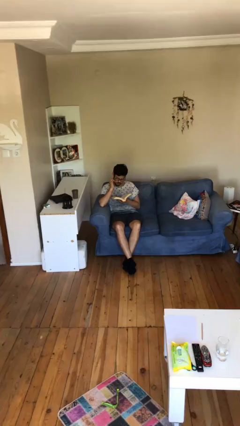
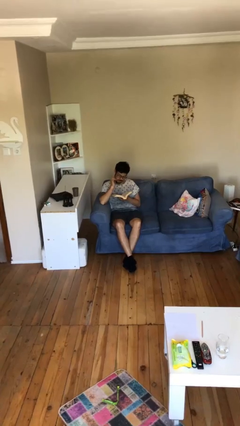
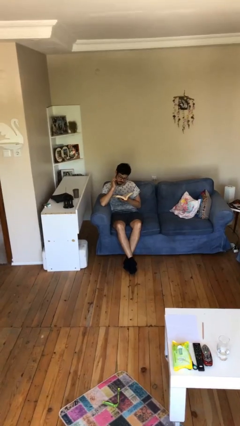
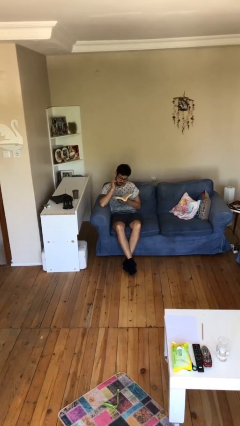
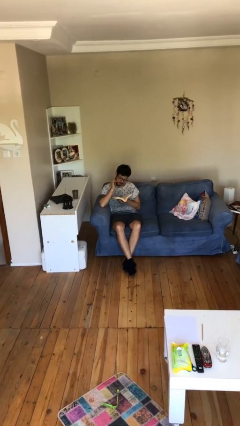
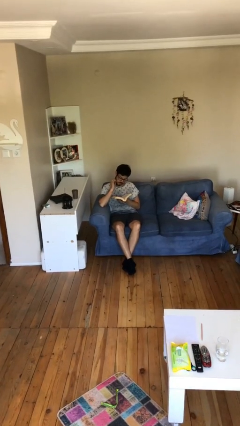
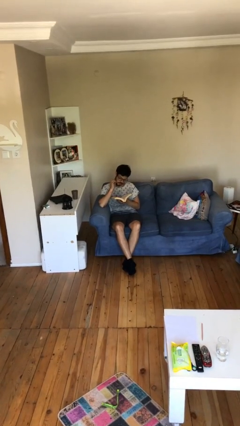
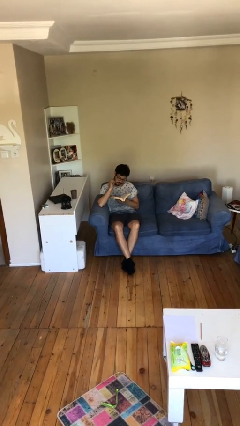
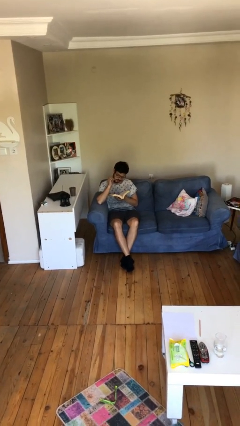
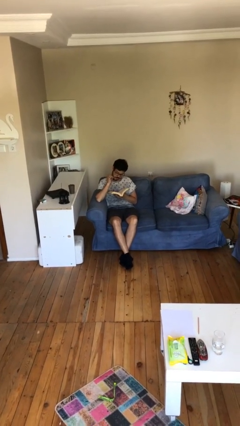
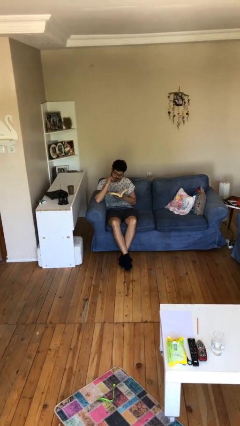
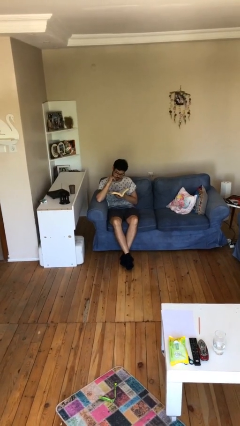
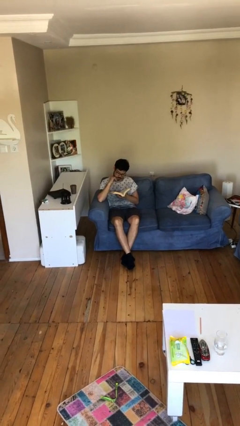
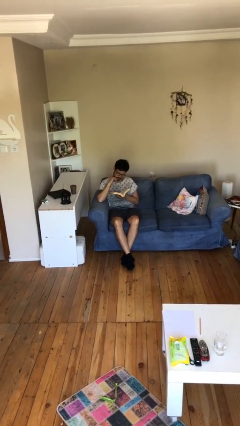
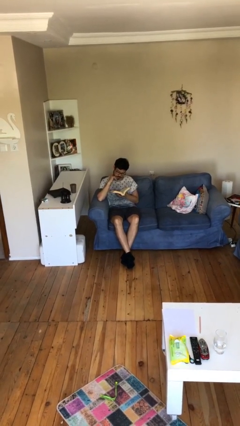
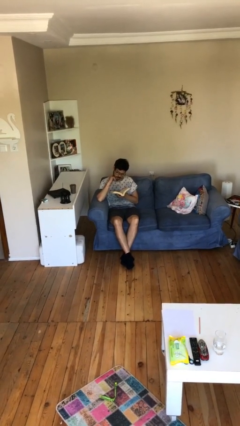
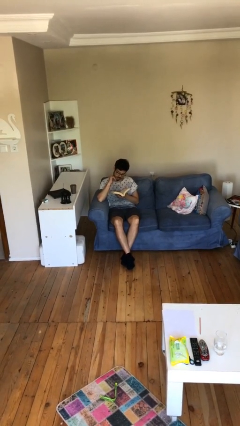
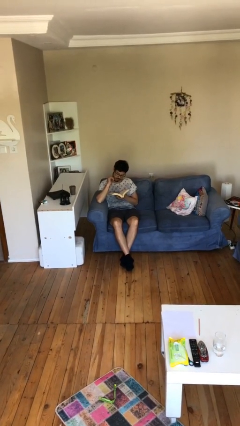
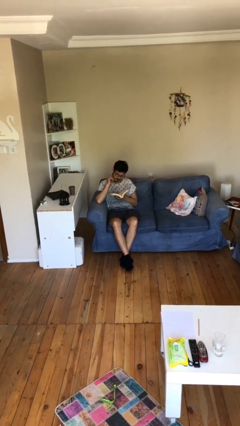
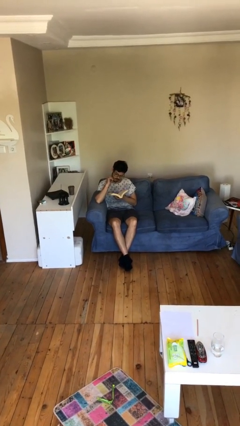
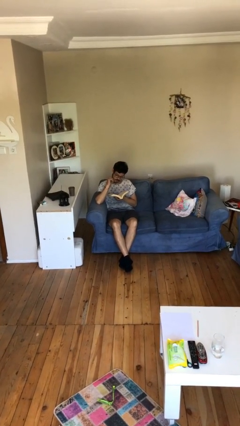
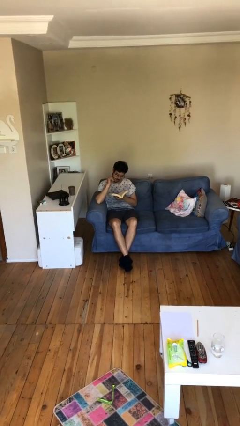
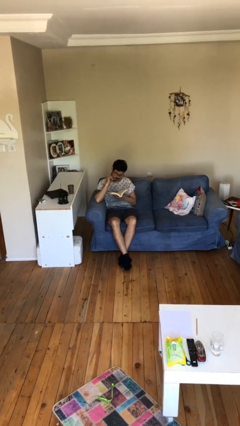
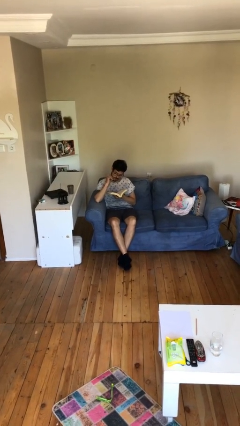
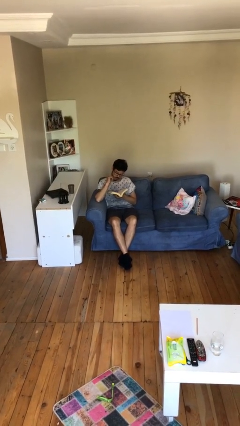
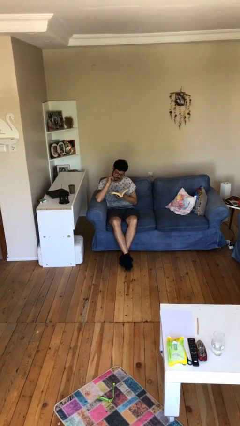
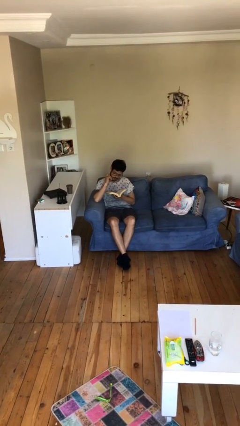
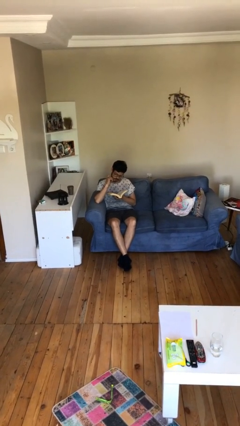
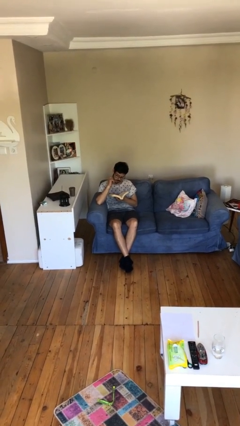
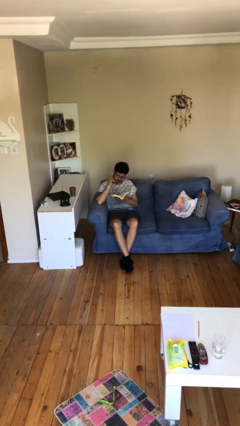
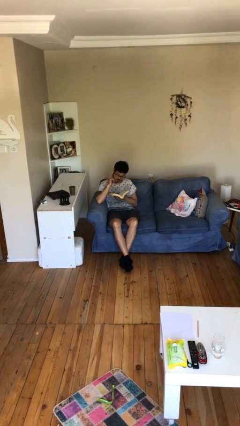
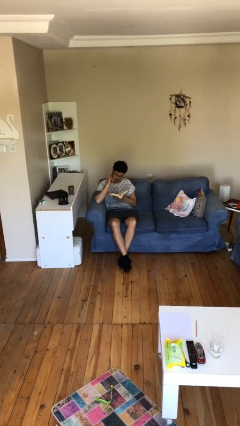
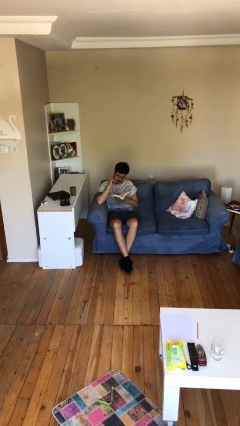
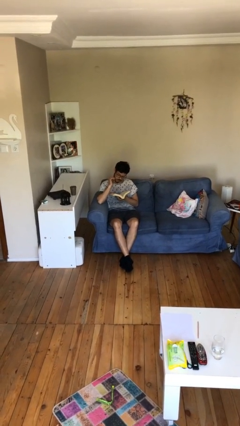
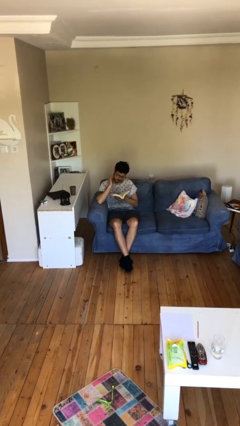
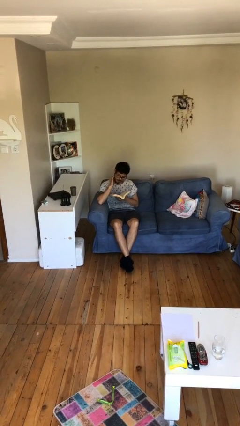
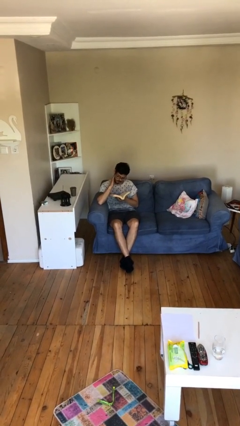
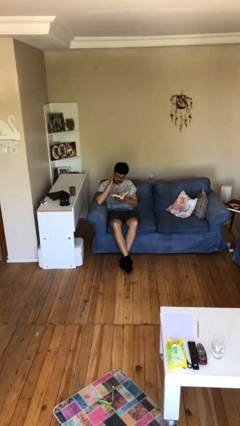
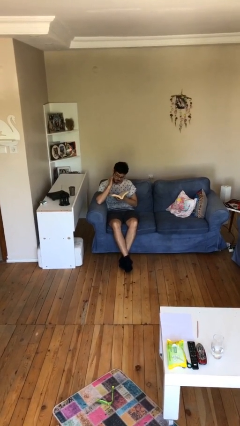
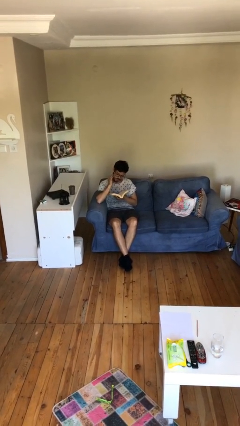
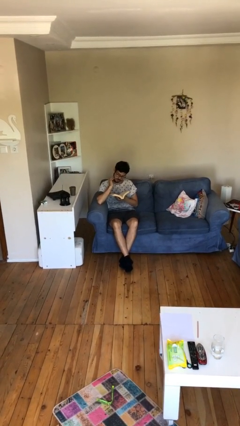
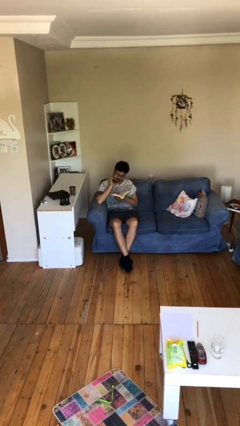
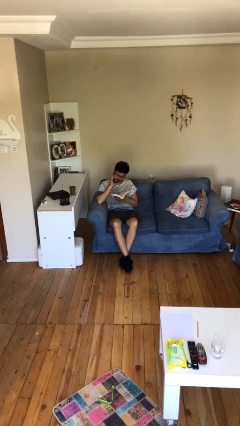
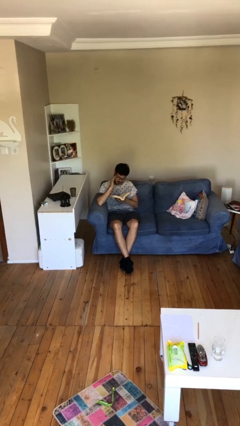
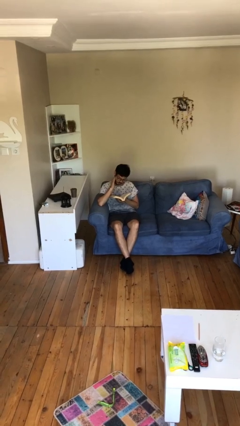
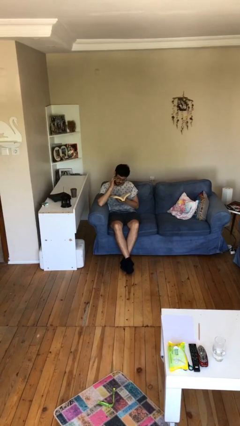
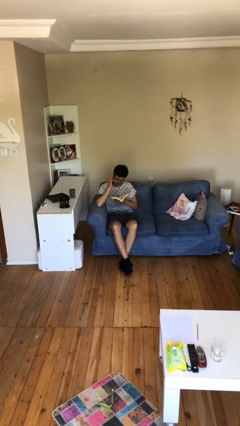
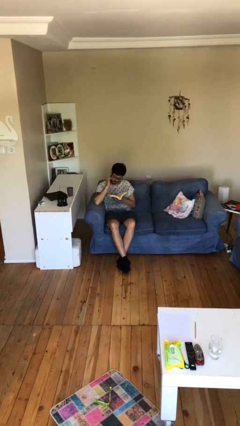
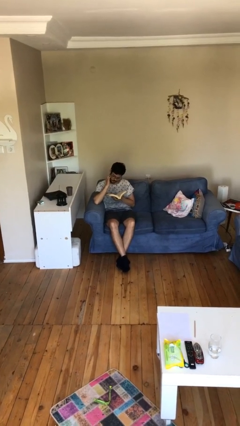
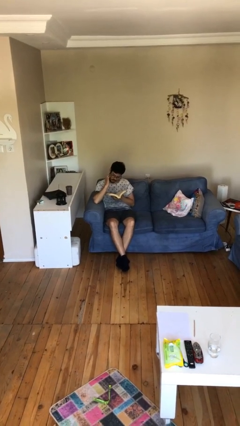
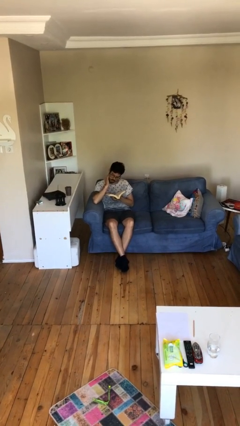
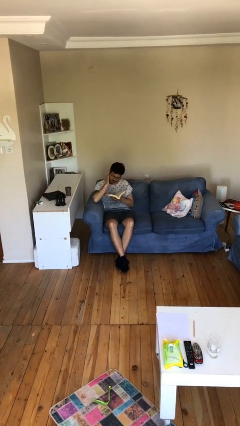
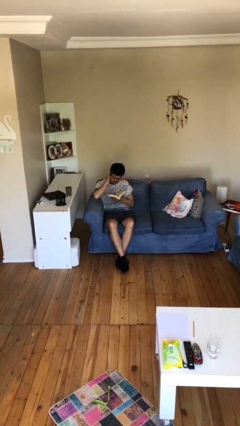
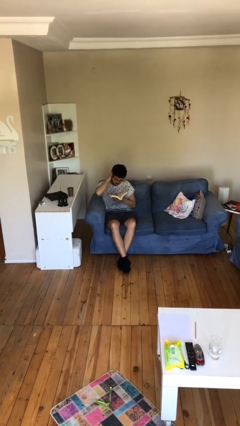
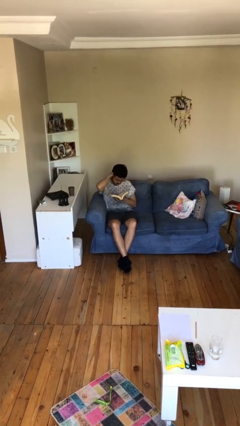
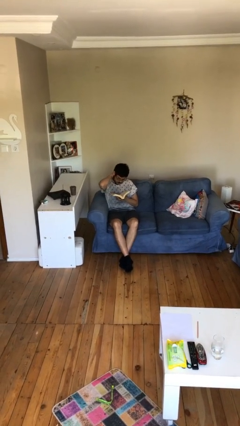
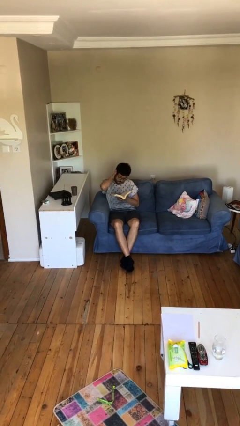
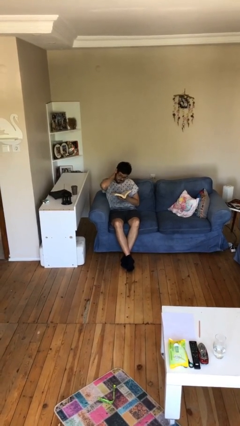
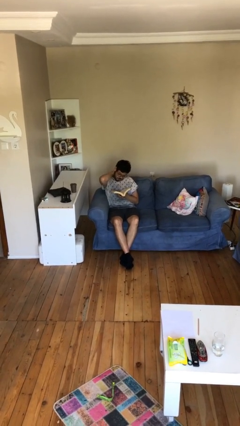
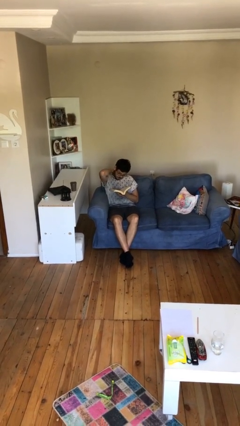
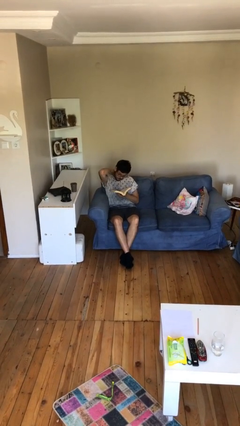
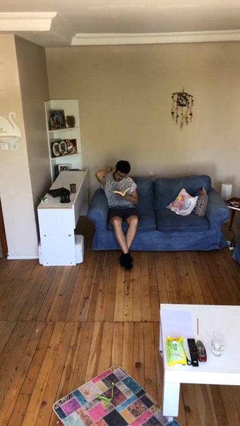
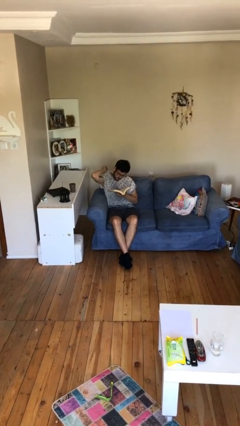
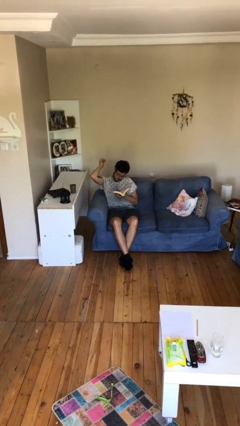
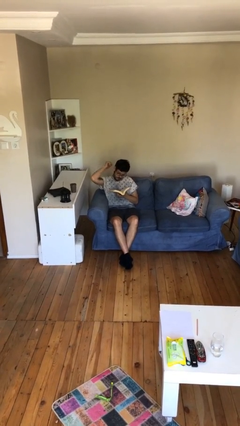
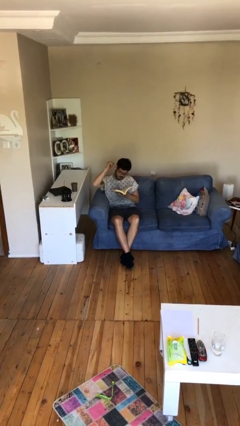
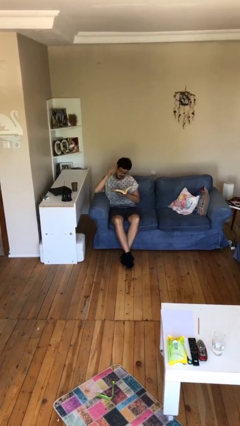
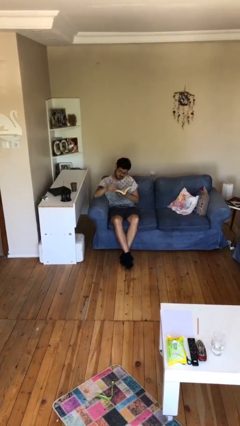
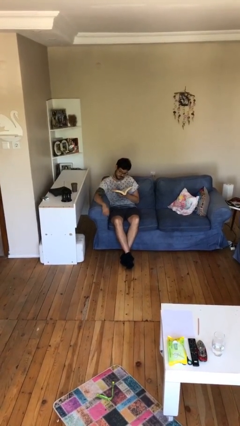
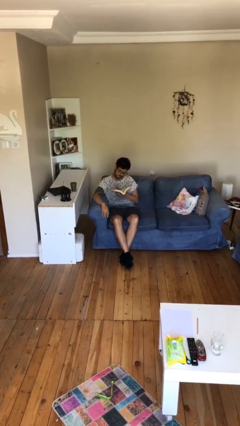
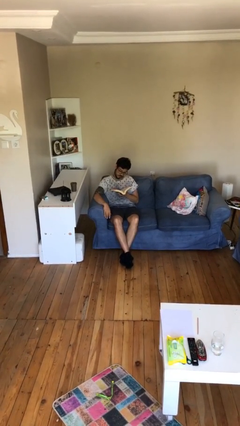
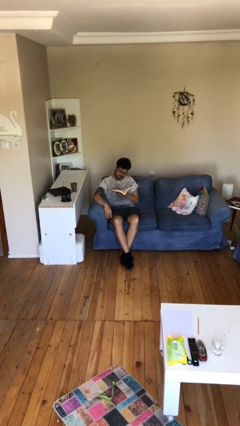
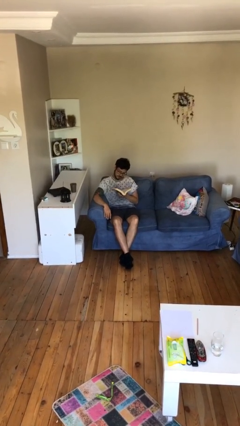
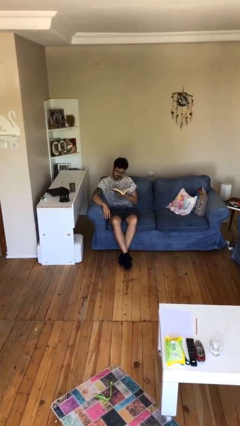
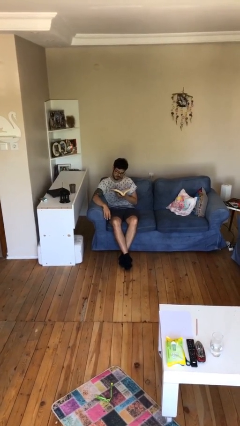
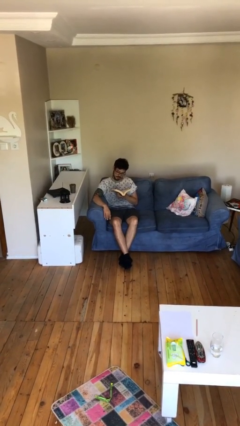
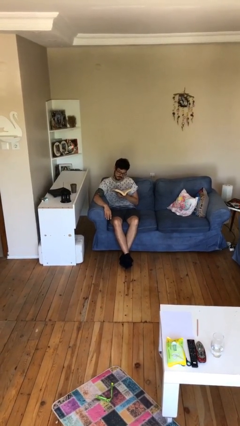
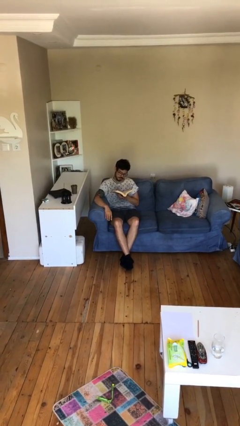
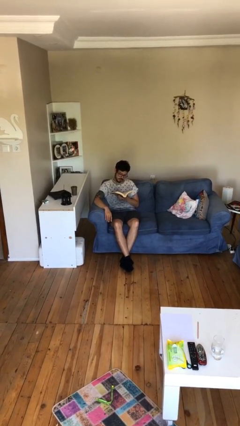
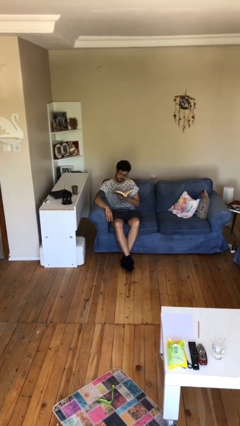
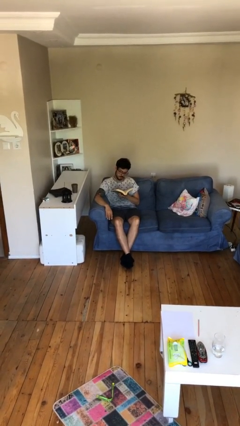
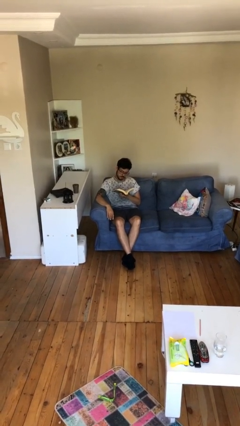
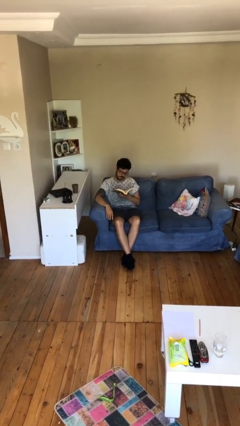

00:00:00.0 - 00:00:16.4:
person reads document

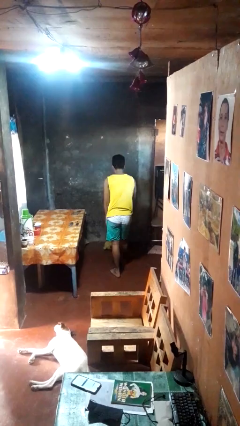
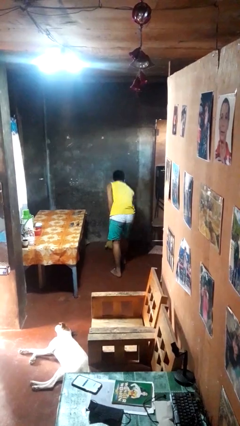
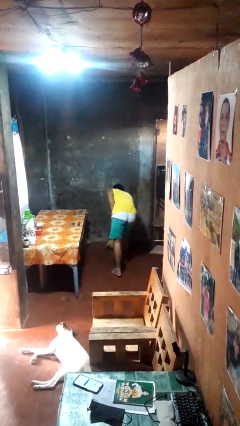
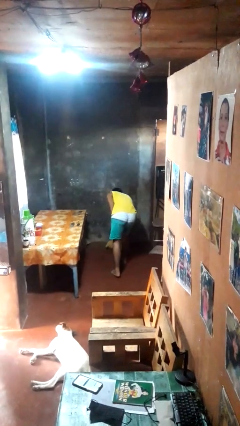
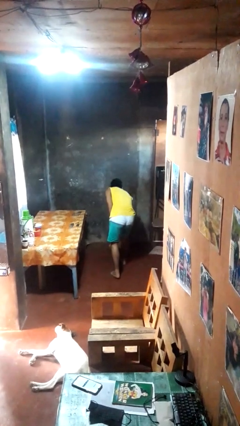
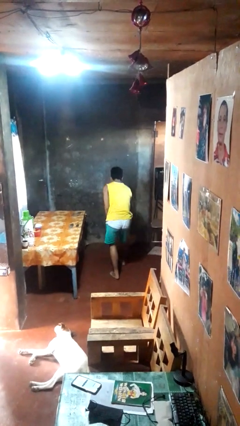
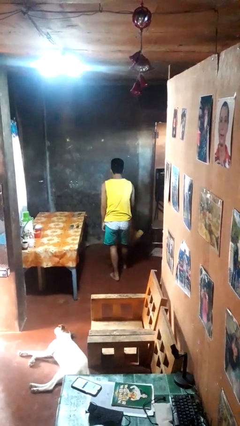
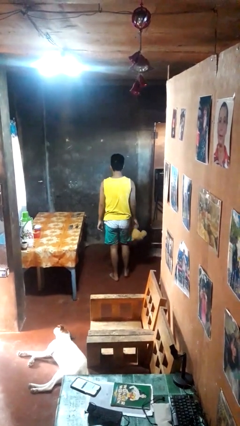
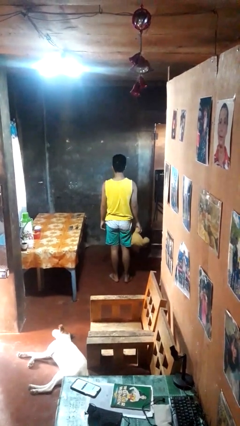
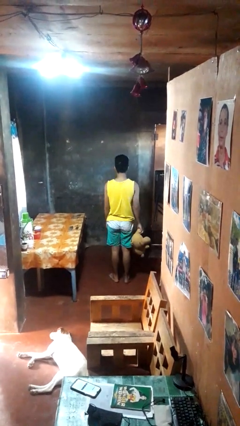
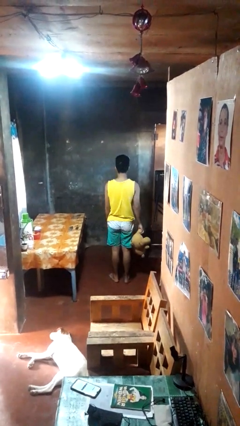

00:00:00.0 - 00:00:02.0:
person picks up object from floor
